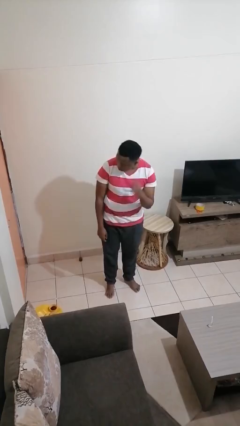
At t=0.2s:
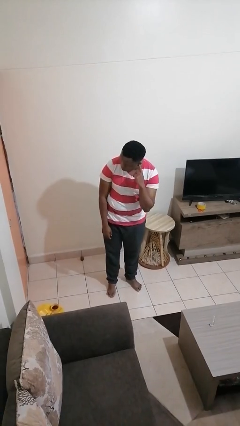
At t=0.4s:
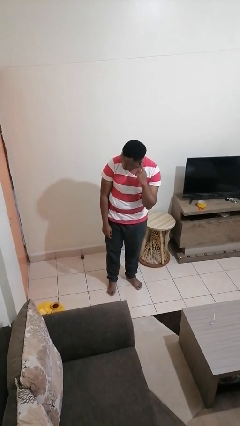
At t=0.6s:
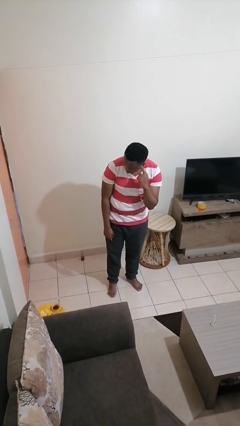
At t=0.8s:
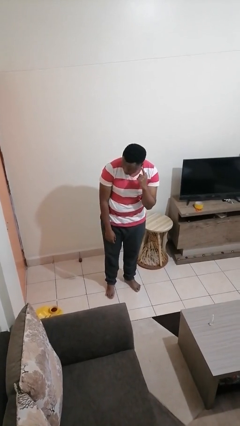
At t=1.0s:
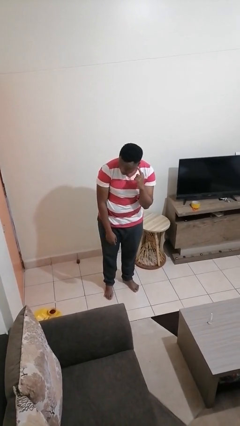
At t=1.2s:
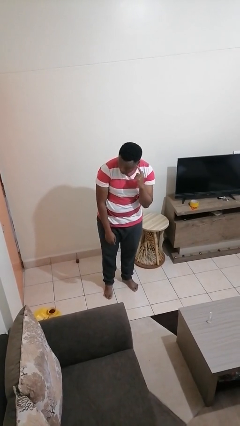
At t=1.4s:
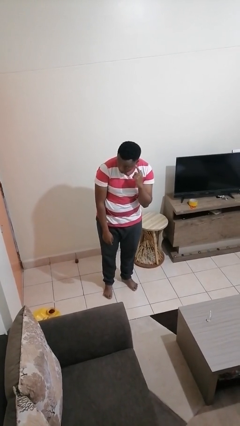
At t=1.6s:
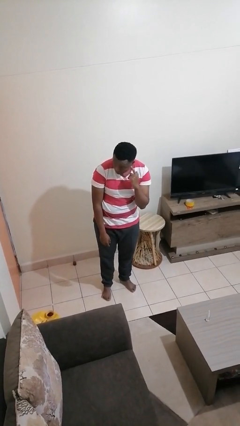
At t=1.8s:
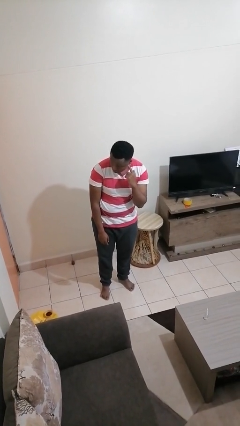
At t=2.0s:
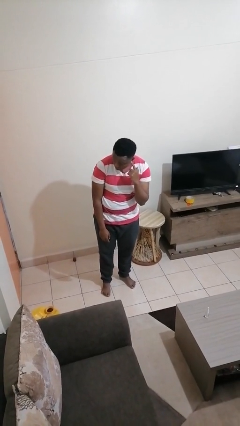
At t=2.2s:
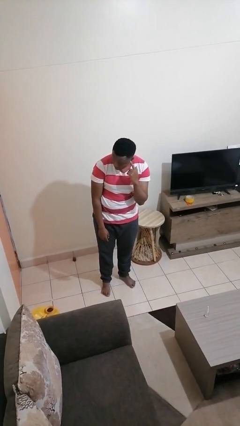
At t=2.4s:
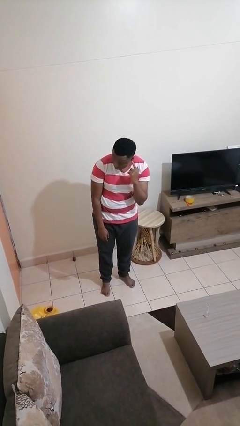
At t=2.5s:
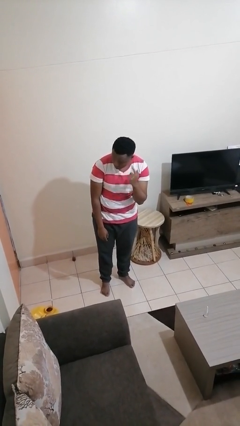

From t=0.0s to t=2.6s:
person gestures listen closely

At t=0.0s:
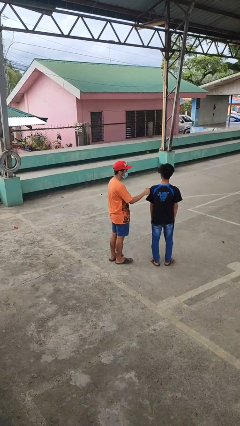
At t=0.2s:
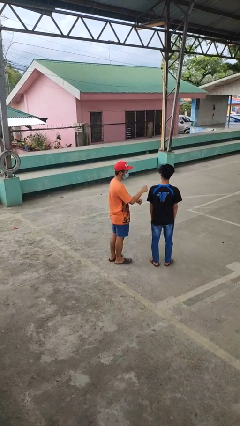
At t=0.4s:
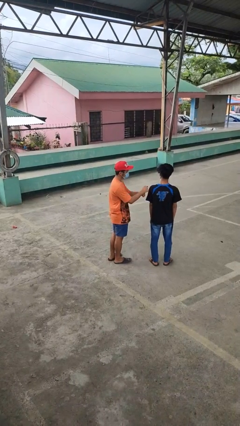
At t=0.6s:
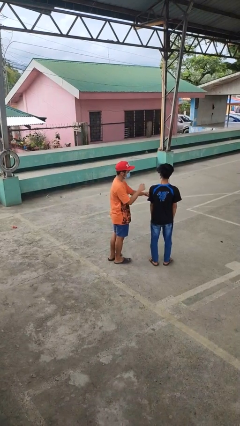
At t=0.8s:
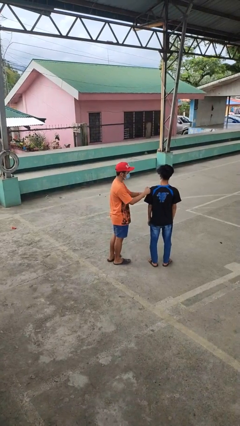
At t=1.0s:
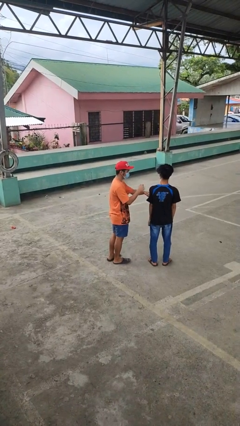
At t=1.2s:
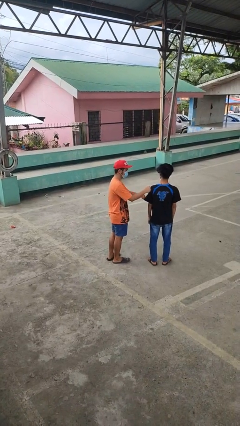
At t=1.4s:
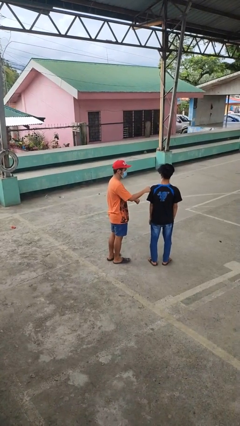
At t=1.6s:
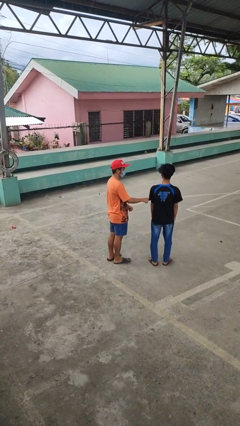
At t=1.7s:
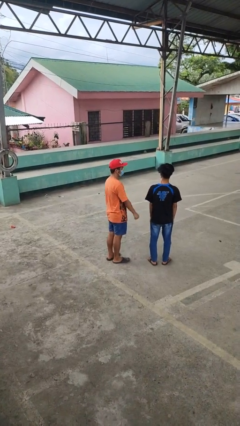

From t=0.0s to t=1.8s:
person pounds shoulders of person

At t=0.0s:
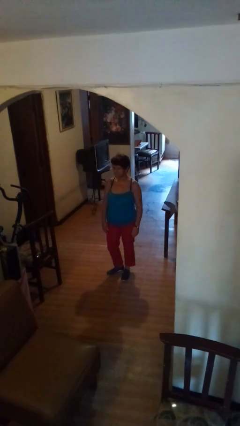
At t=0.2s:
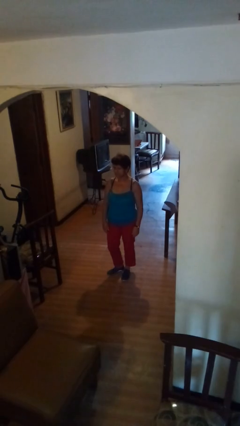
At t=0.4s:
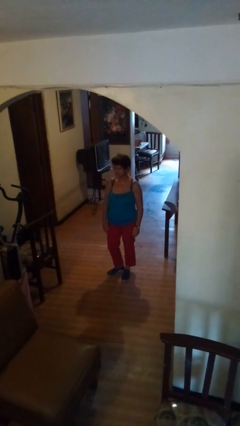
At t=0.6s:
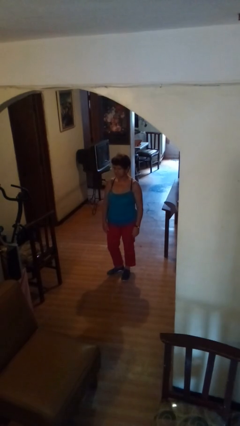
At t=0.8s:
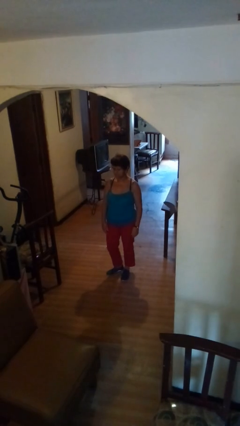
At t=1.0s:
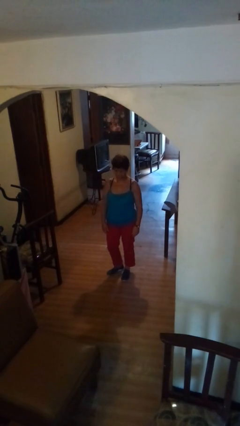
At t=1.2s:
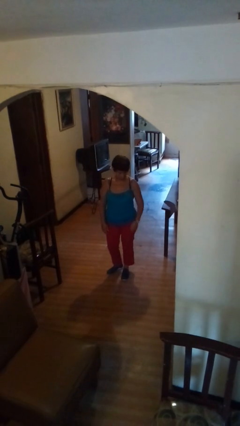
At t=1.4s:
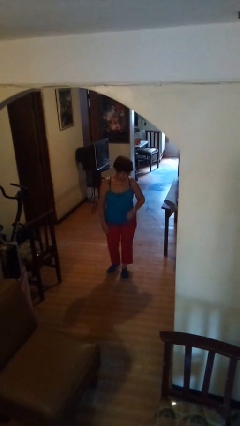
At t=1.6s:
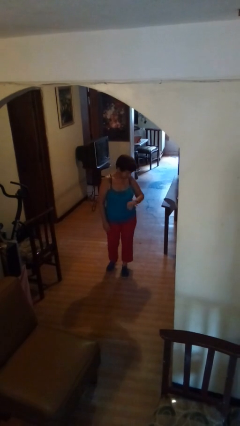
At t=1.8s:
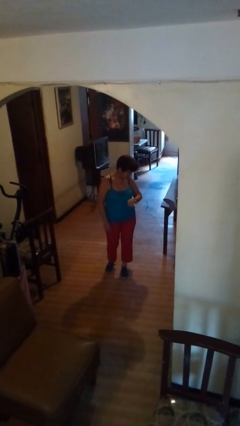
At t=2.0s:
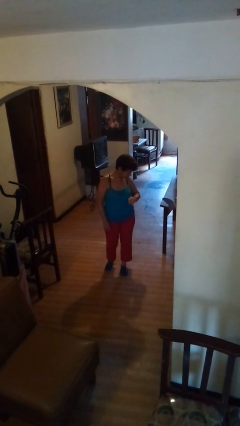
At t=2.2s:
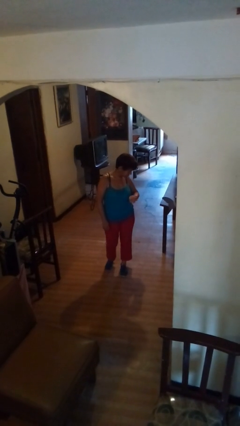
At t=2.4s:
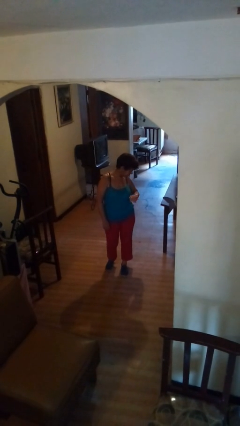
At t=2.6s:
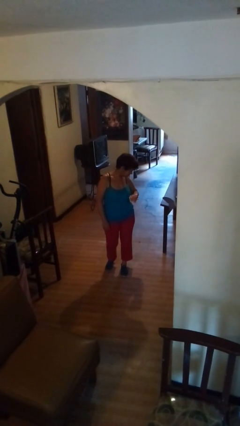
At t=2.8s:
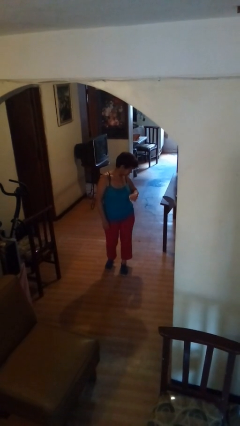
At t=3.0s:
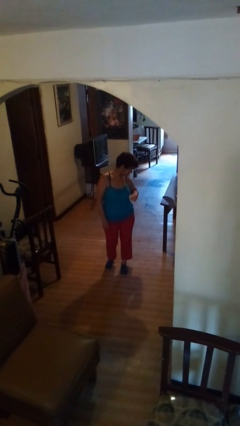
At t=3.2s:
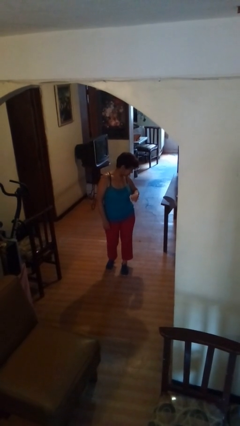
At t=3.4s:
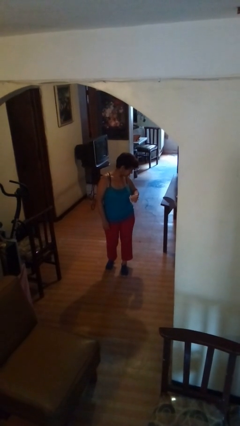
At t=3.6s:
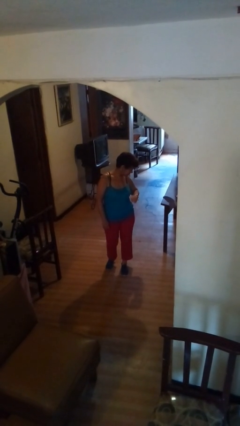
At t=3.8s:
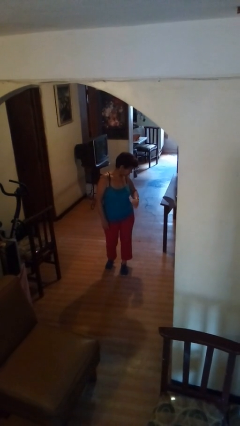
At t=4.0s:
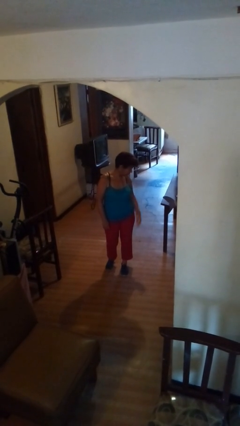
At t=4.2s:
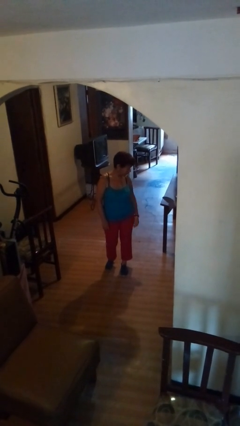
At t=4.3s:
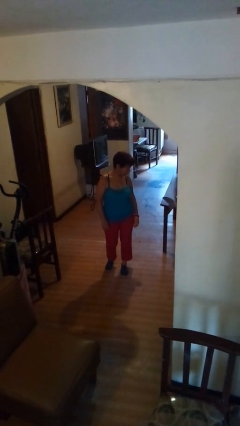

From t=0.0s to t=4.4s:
person looks at wristwatch

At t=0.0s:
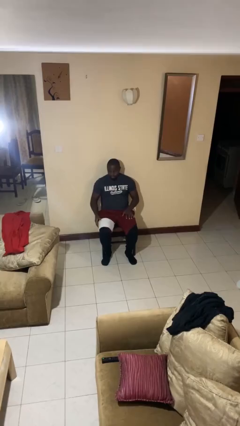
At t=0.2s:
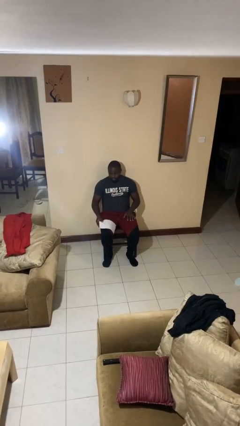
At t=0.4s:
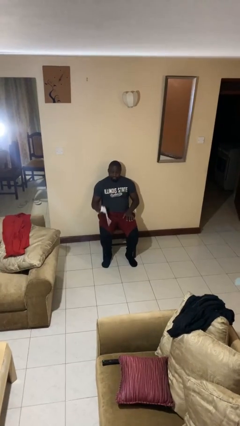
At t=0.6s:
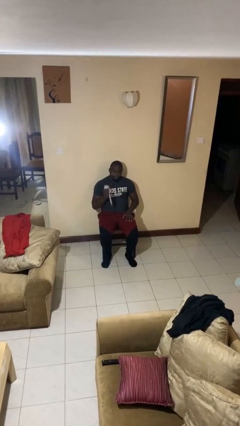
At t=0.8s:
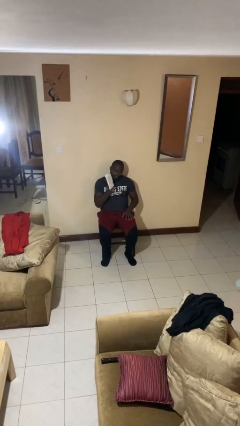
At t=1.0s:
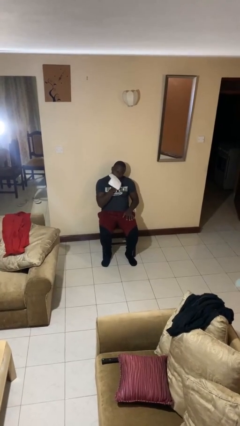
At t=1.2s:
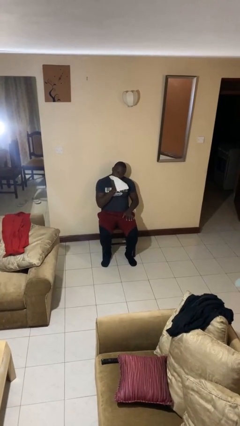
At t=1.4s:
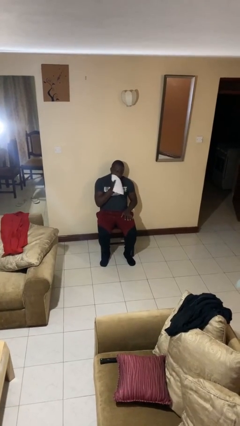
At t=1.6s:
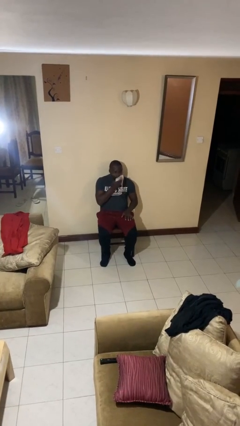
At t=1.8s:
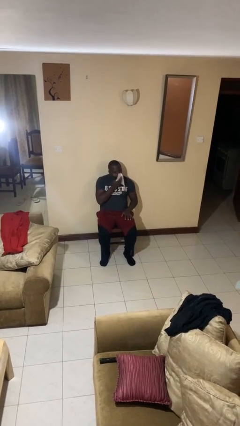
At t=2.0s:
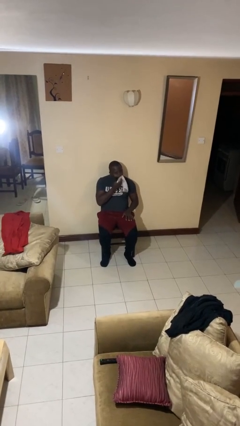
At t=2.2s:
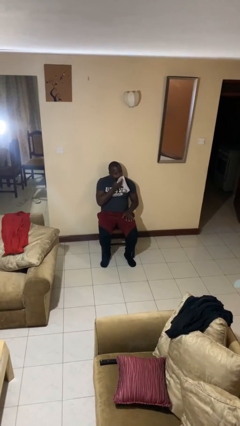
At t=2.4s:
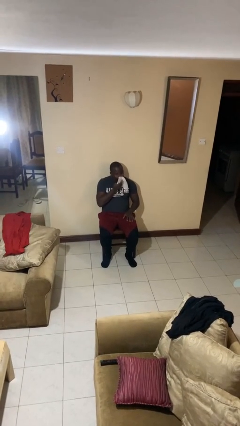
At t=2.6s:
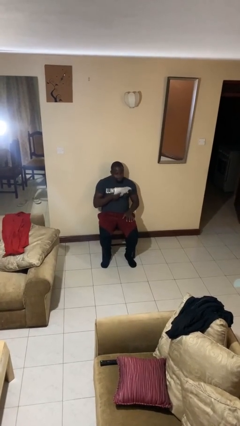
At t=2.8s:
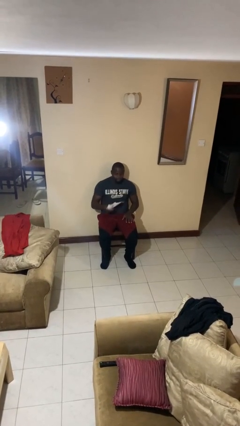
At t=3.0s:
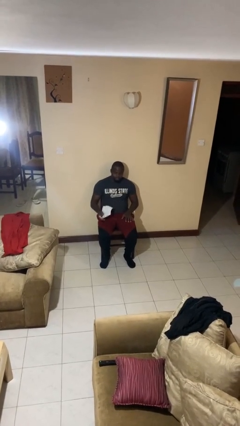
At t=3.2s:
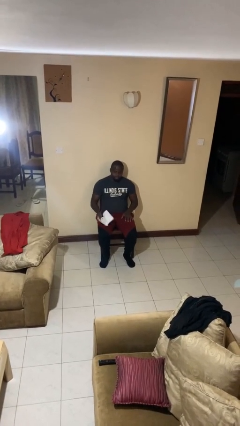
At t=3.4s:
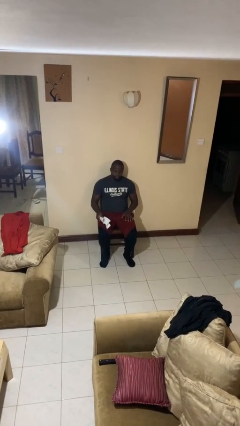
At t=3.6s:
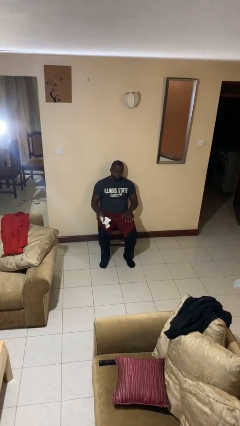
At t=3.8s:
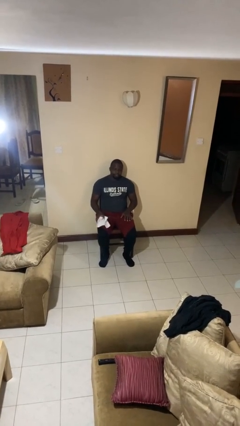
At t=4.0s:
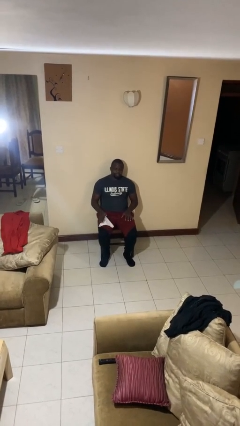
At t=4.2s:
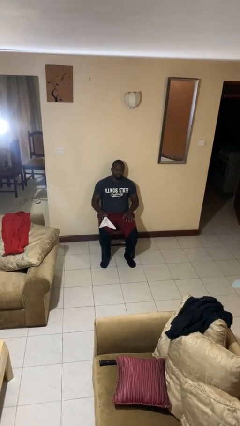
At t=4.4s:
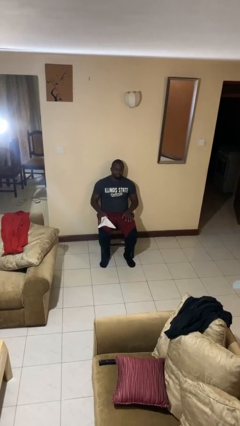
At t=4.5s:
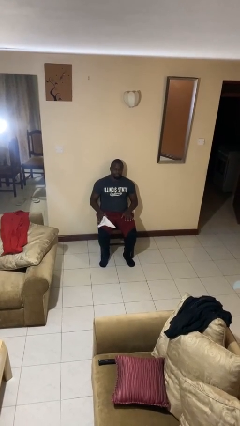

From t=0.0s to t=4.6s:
person wipes mouth with napkin

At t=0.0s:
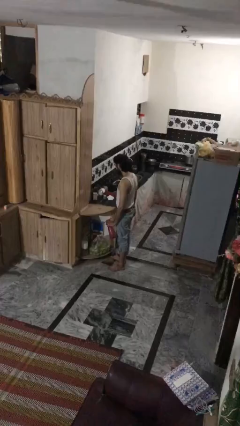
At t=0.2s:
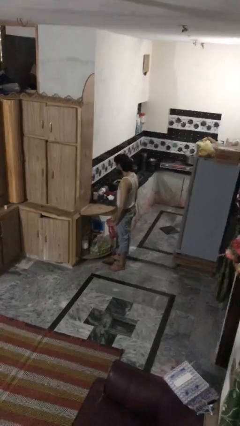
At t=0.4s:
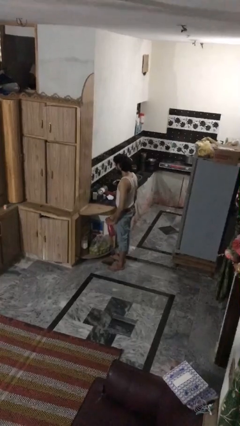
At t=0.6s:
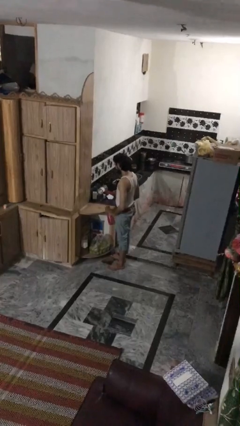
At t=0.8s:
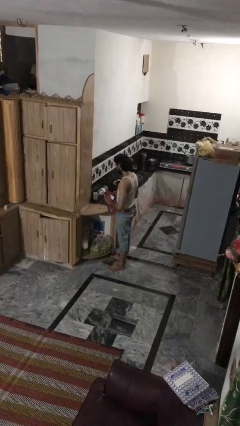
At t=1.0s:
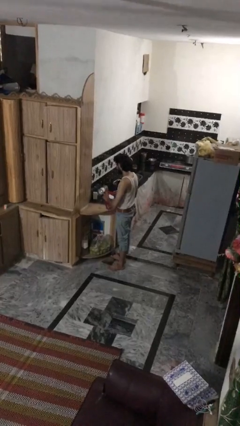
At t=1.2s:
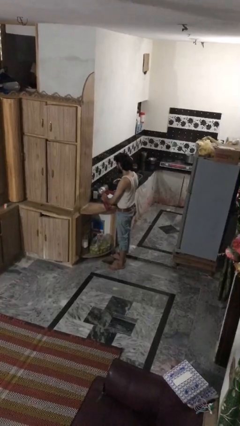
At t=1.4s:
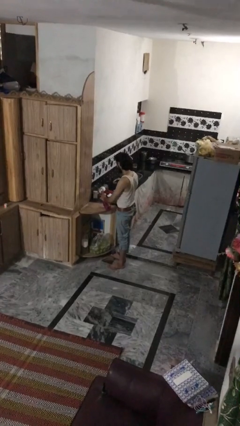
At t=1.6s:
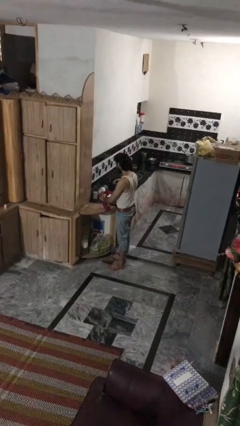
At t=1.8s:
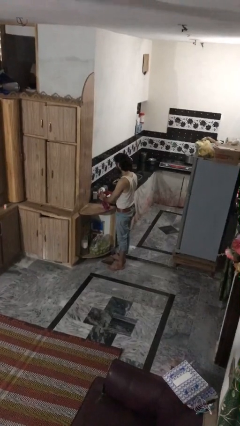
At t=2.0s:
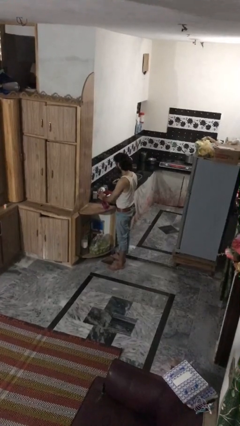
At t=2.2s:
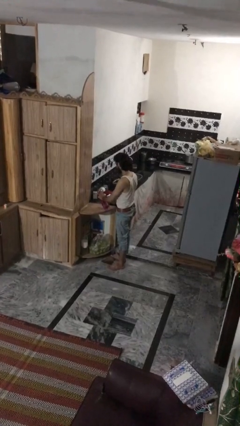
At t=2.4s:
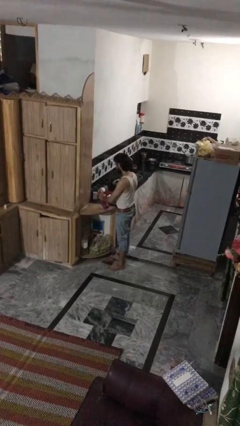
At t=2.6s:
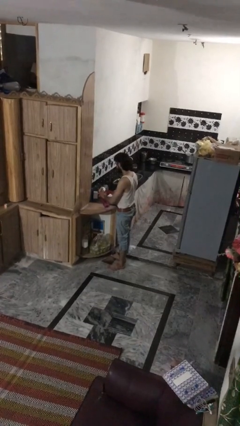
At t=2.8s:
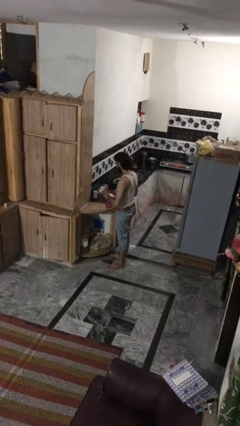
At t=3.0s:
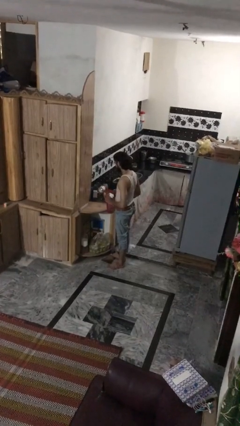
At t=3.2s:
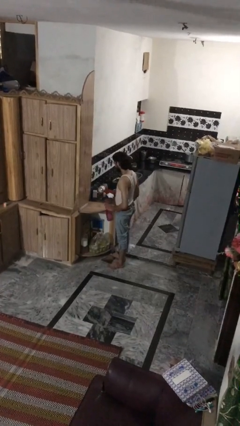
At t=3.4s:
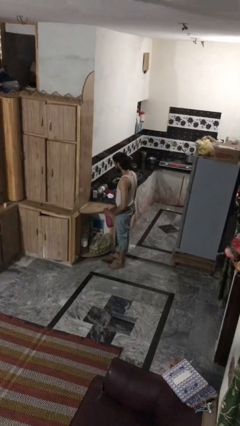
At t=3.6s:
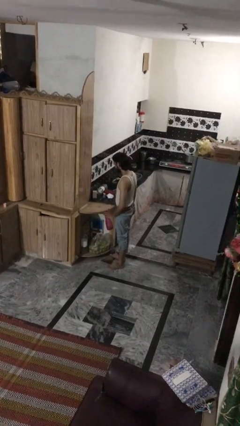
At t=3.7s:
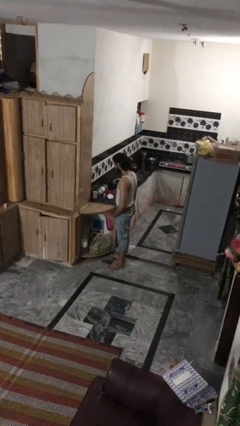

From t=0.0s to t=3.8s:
person sprays from bottle

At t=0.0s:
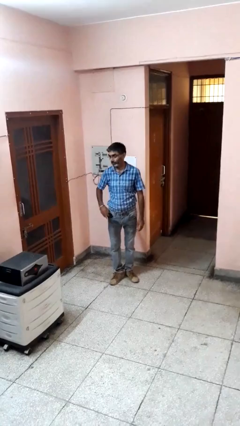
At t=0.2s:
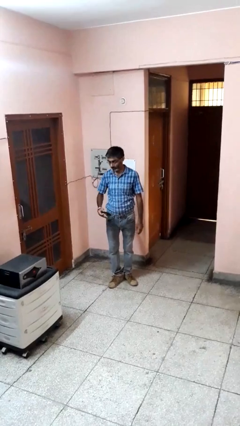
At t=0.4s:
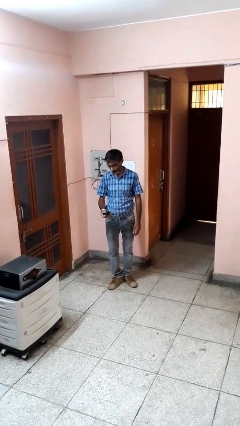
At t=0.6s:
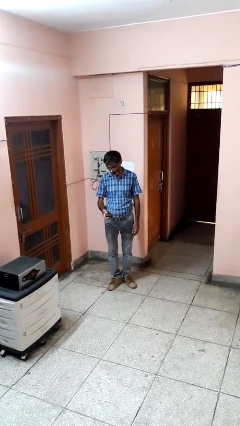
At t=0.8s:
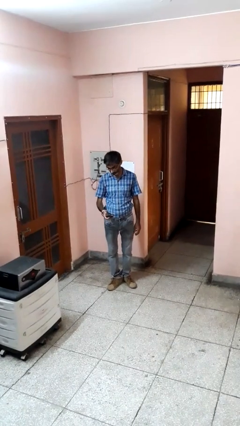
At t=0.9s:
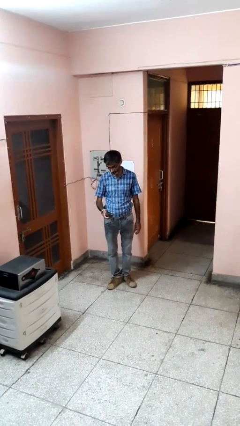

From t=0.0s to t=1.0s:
person takes phone from pocket
